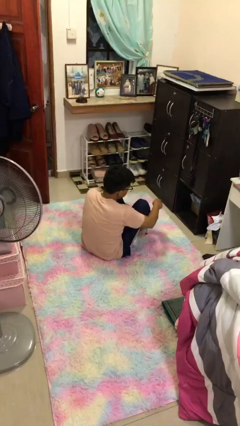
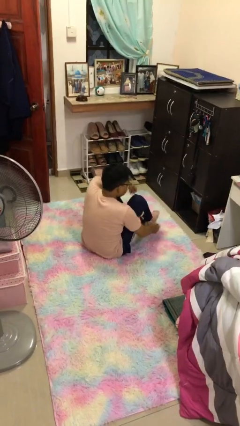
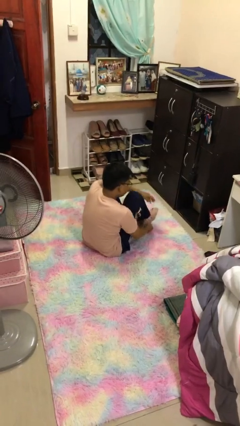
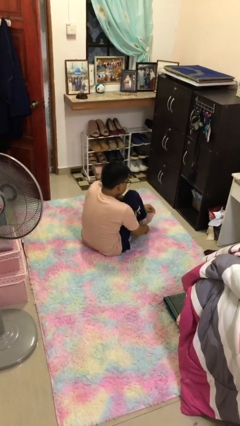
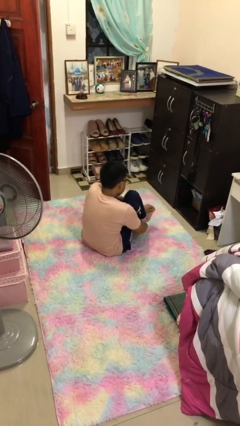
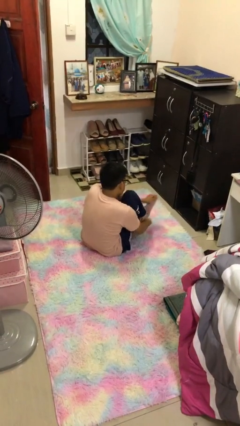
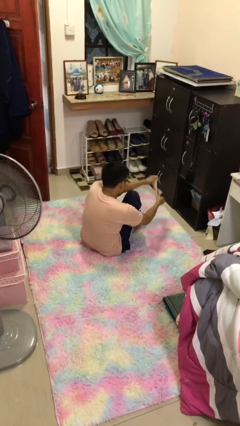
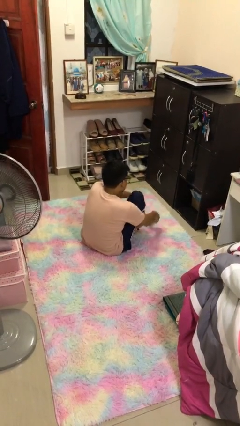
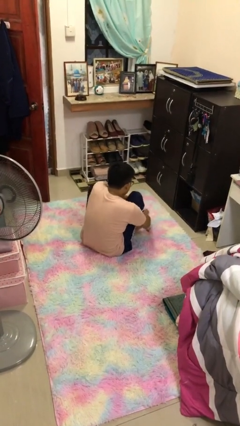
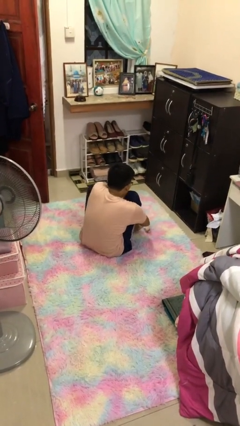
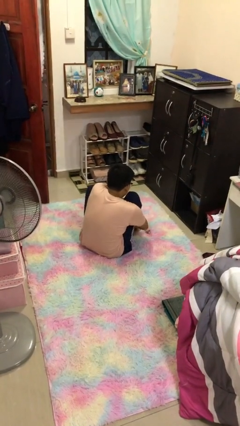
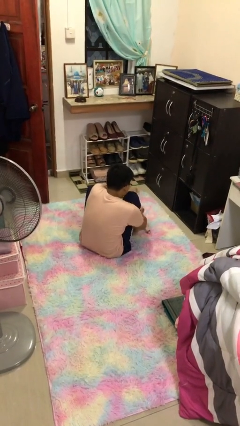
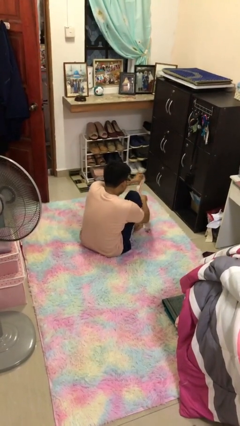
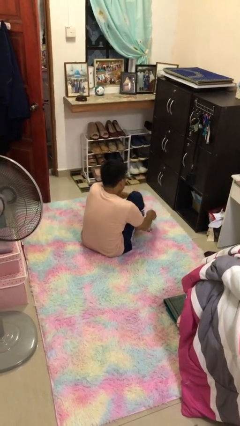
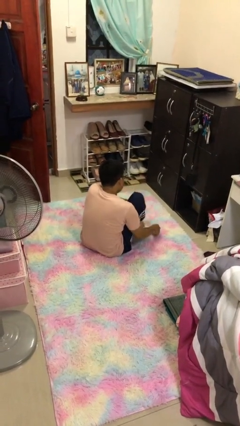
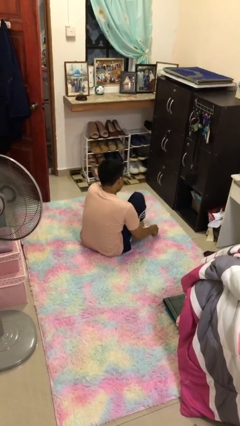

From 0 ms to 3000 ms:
person takes off socks

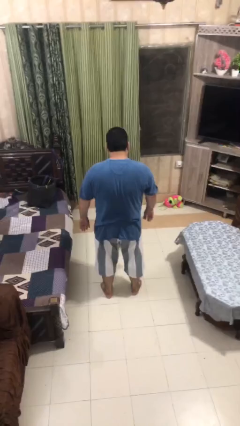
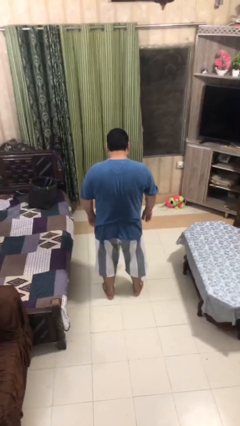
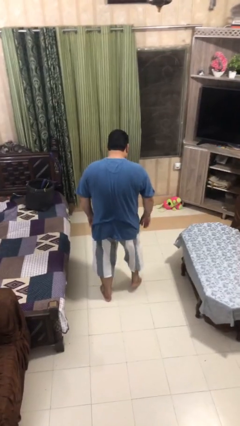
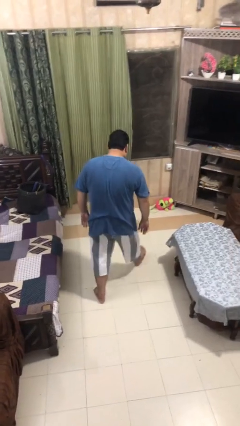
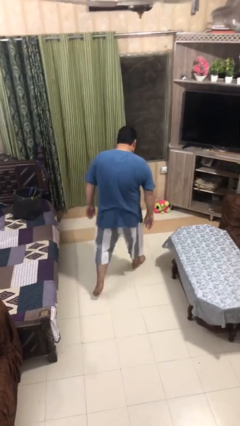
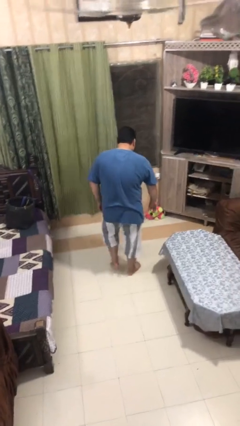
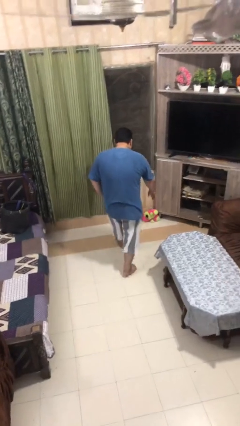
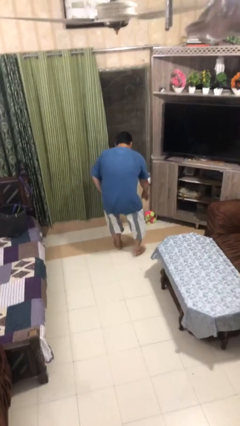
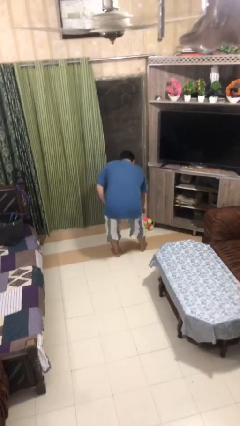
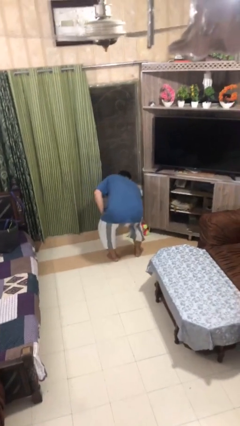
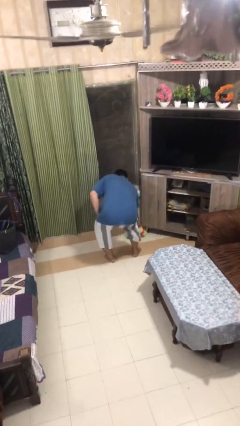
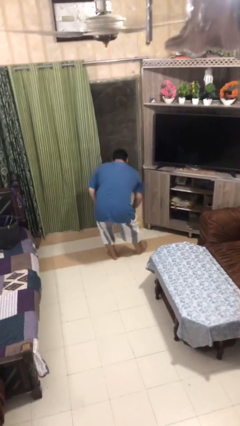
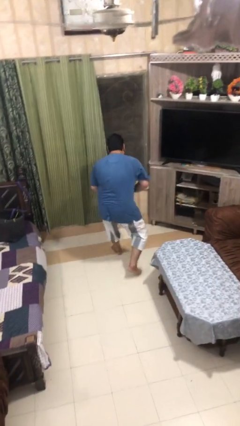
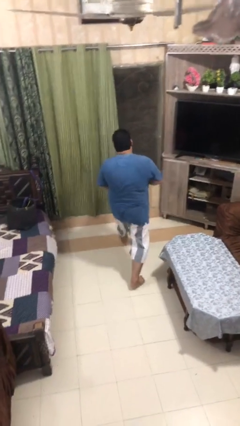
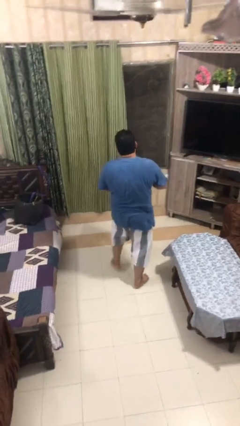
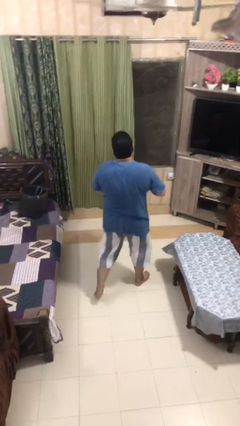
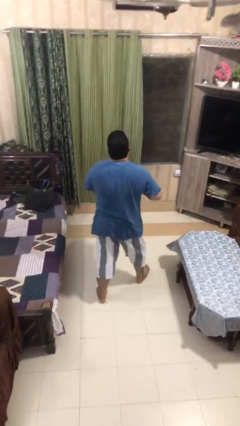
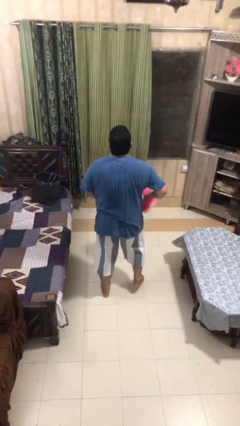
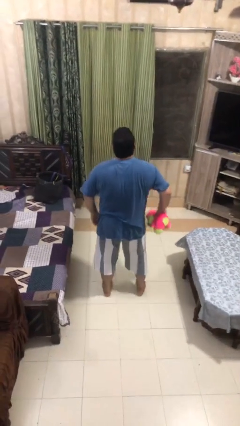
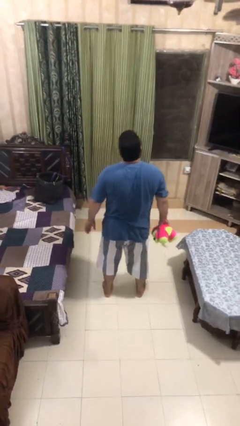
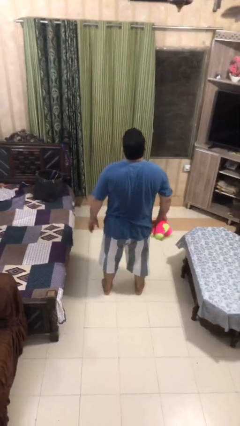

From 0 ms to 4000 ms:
person picks up object from floor

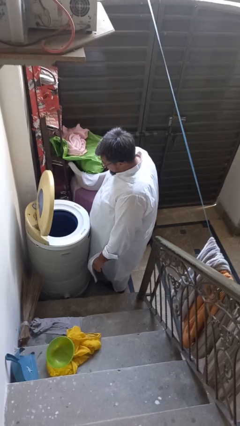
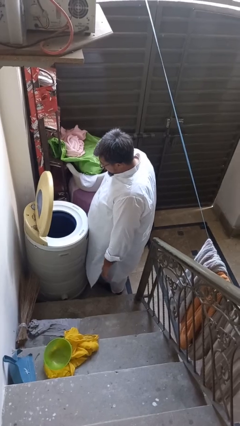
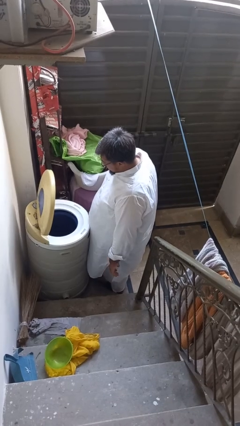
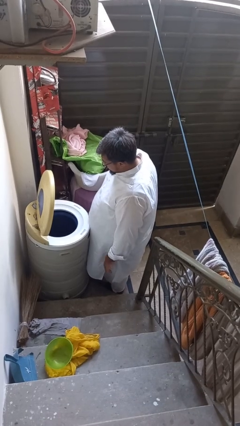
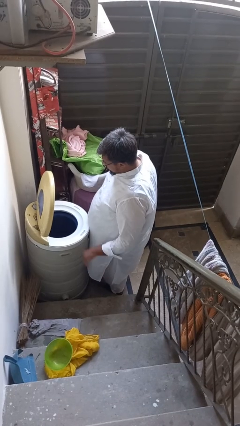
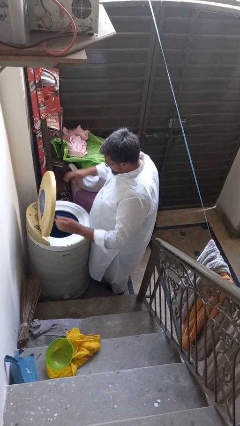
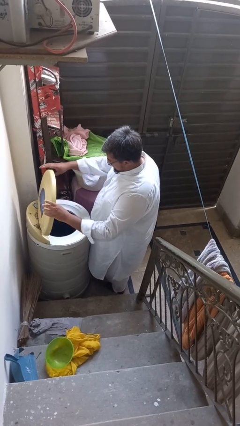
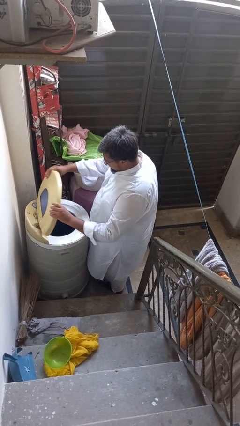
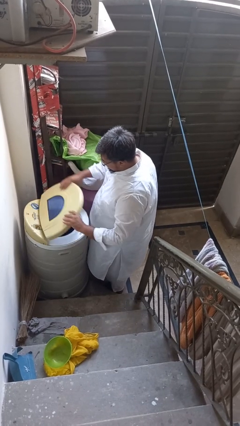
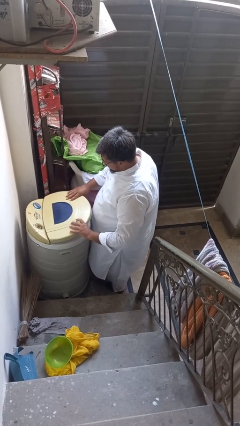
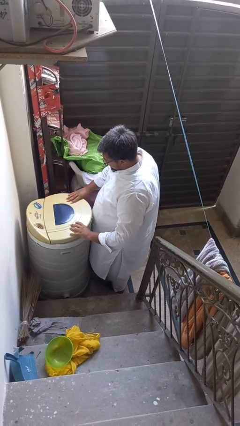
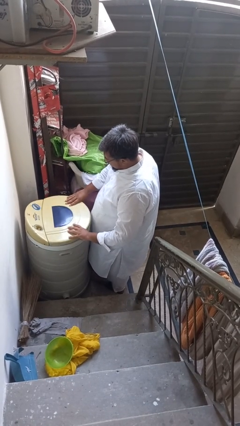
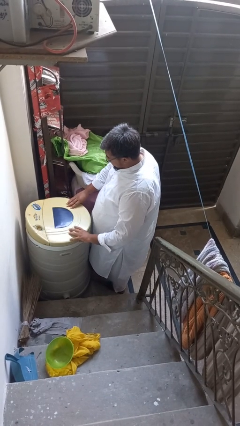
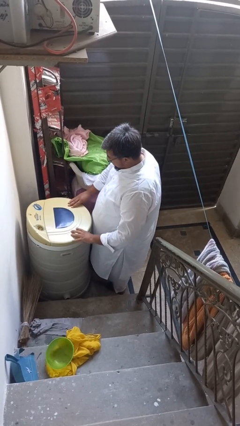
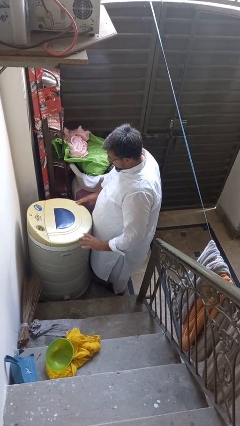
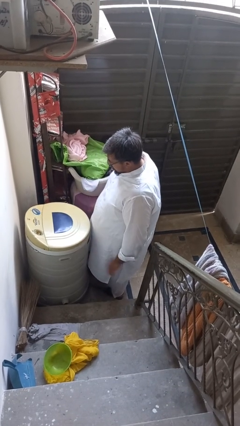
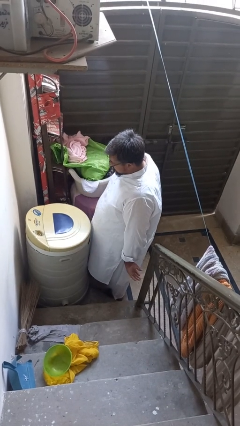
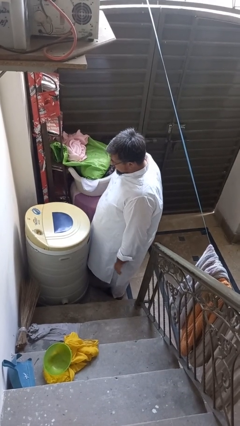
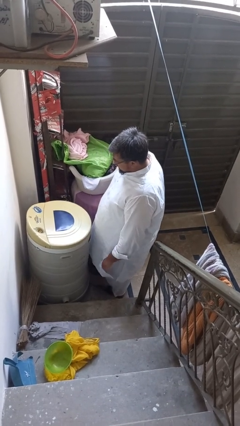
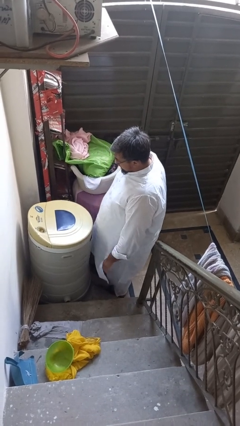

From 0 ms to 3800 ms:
person closes clothes washer

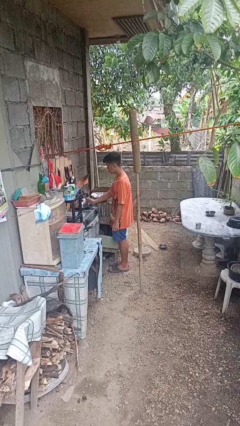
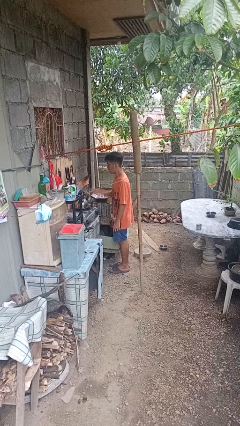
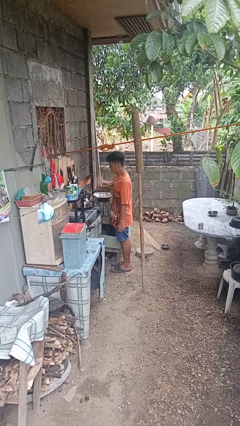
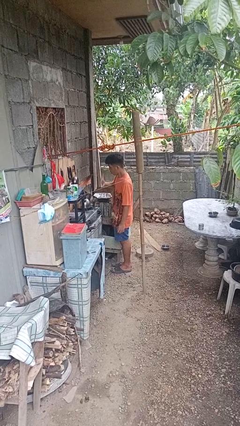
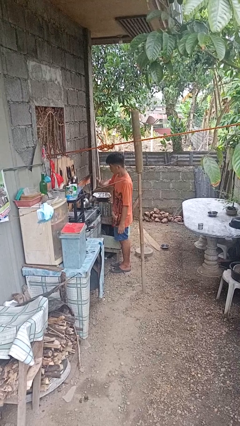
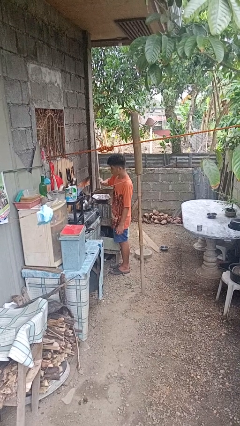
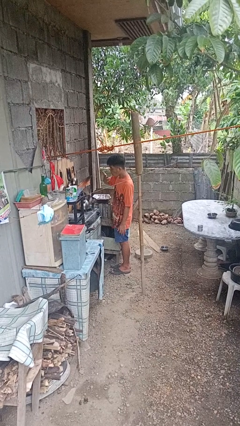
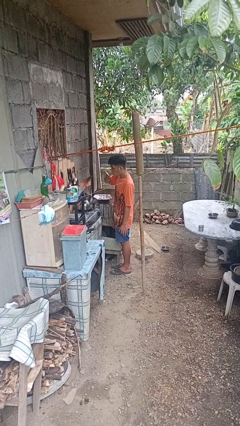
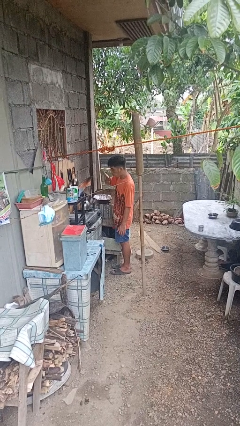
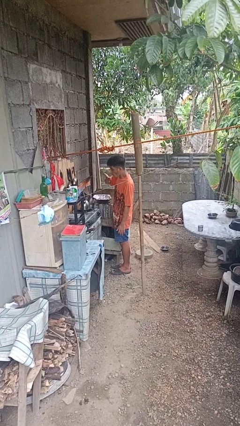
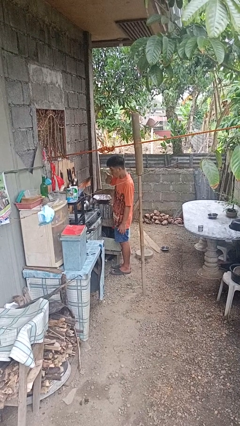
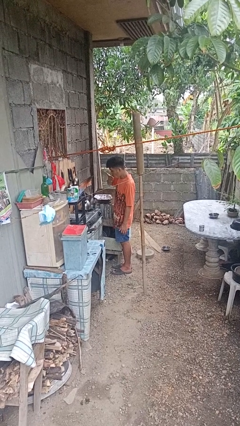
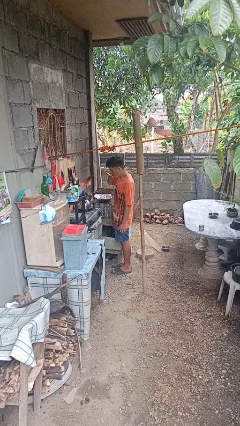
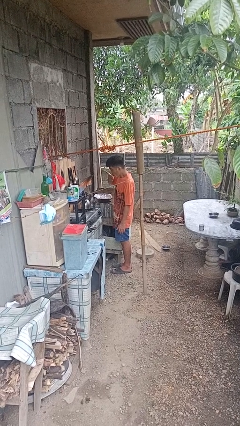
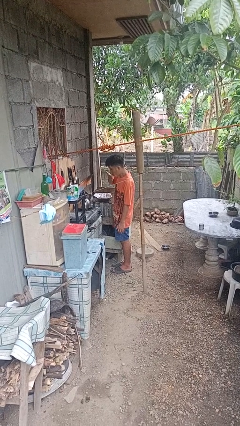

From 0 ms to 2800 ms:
person burns hand

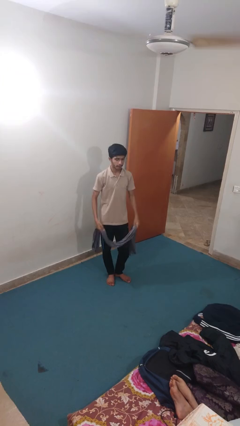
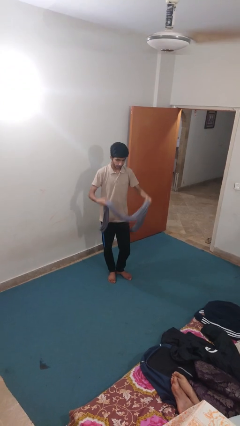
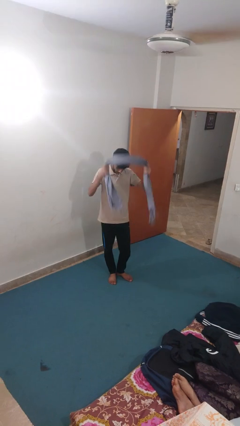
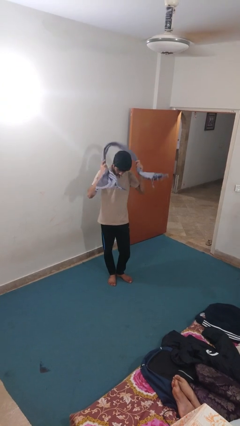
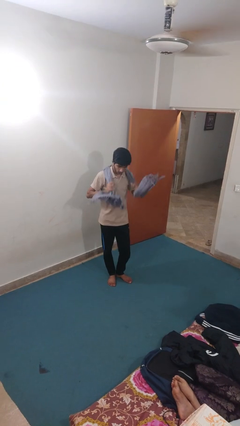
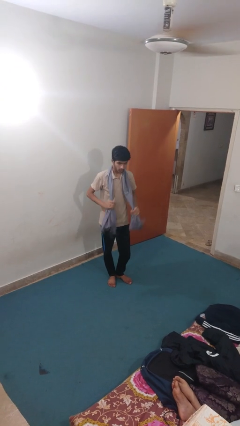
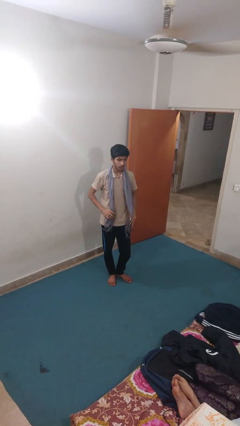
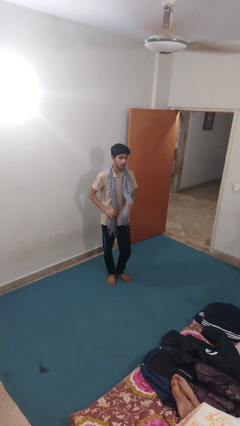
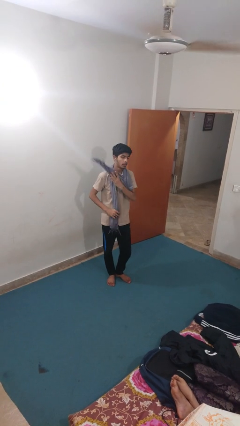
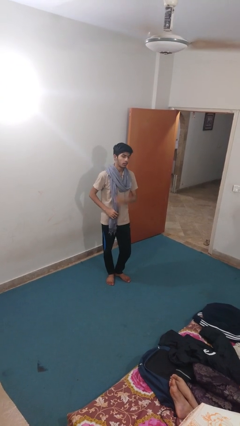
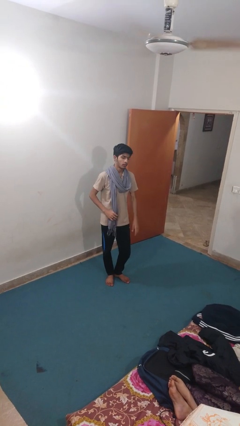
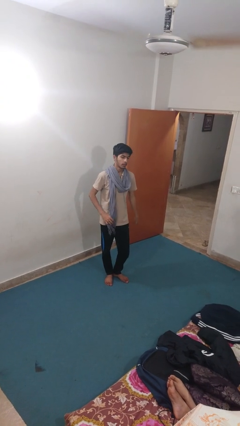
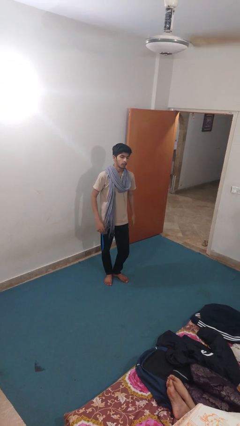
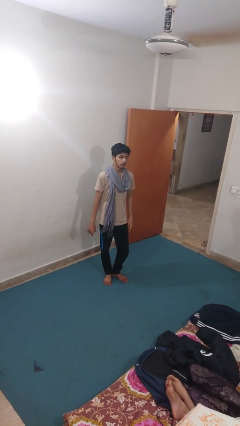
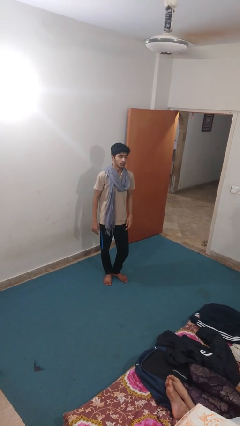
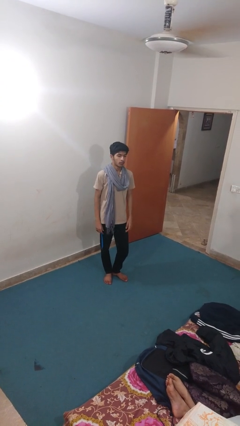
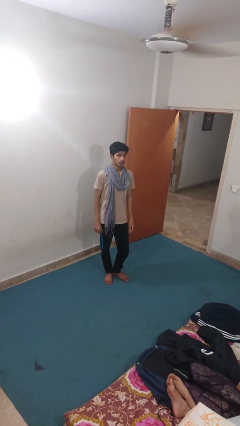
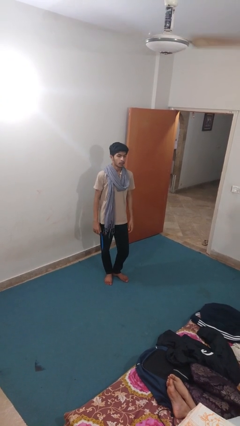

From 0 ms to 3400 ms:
person puts on scarf

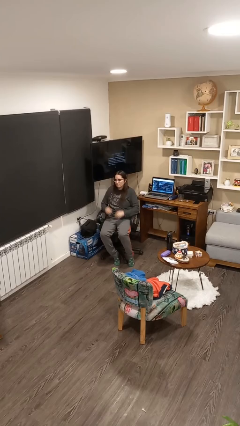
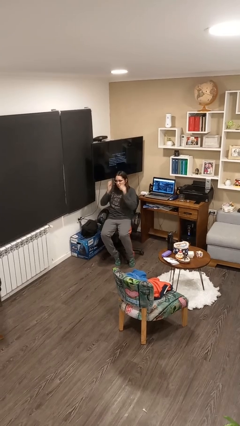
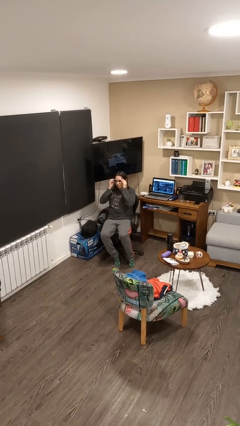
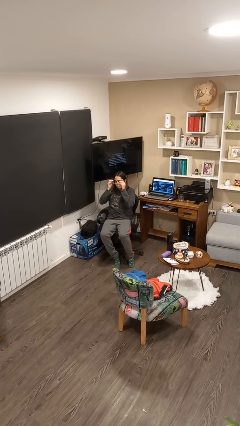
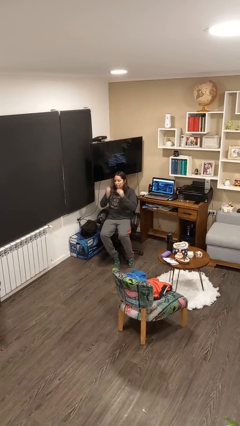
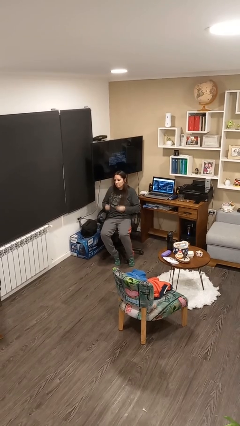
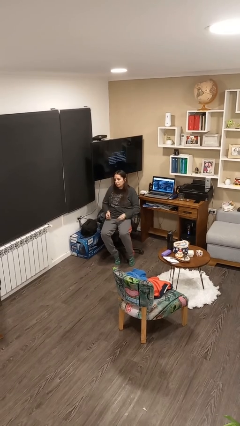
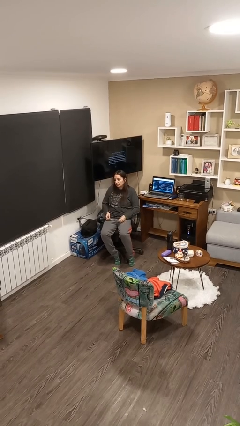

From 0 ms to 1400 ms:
person takes off glasses
